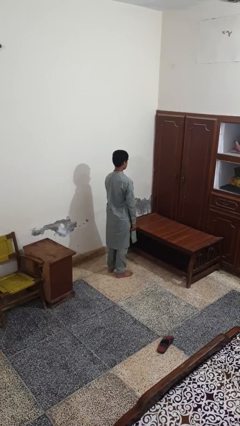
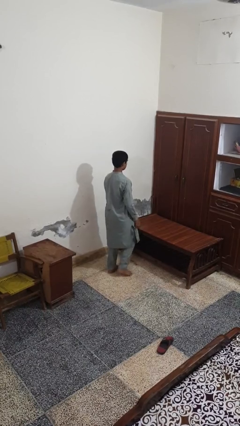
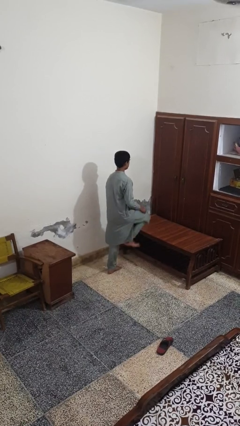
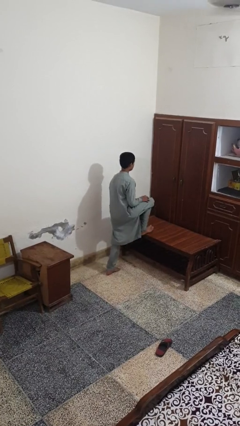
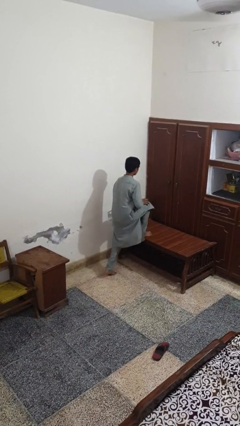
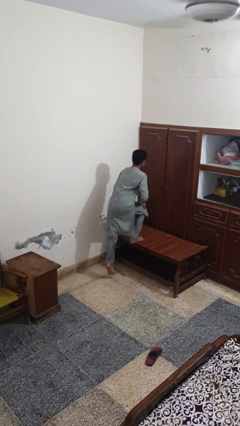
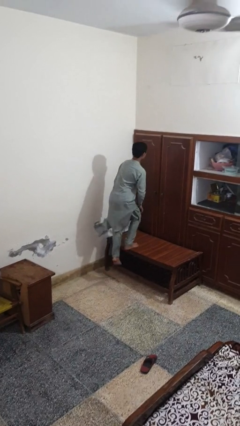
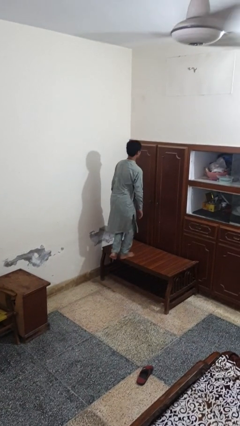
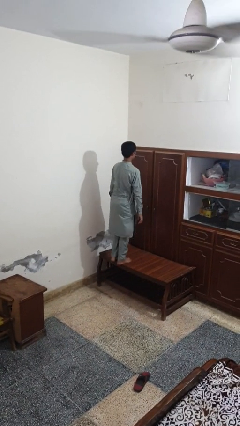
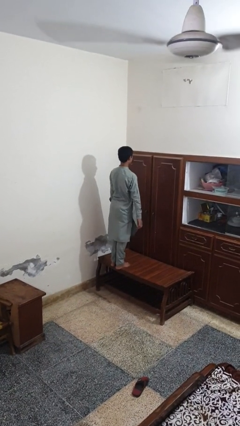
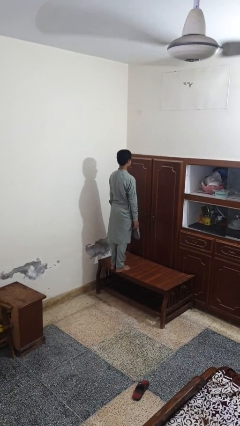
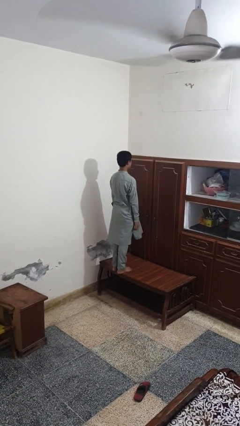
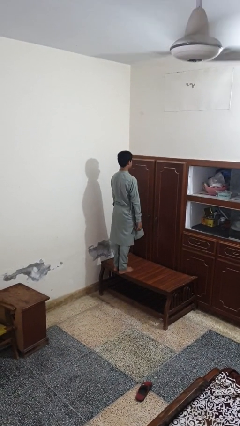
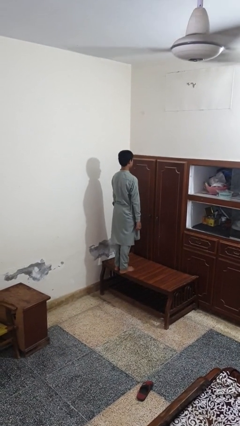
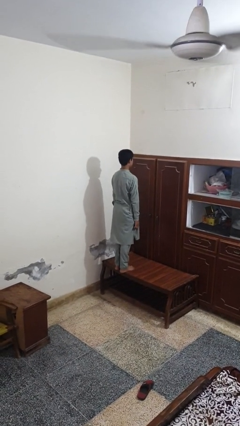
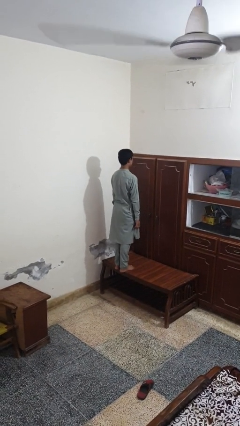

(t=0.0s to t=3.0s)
person climbs on table

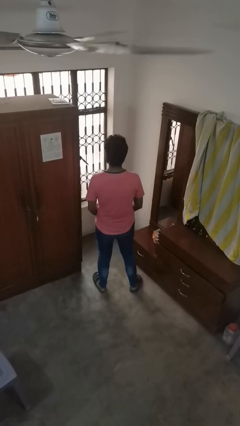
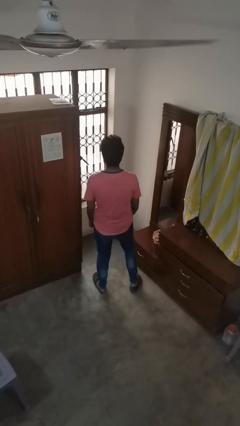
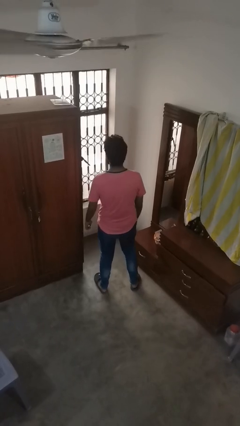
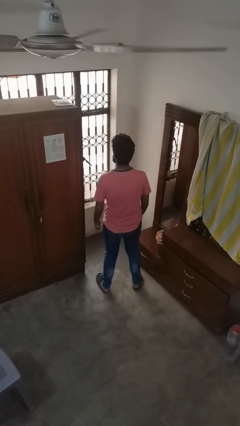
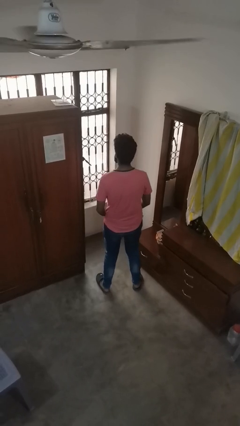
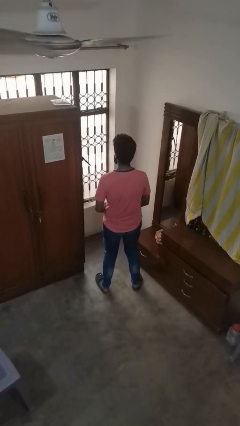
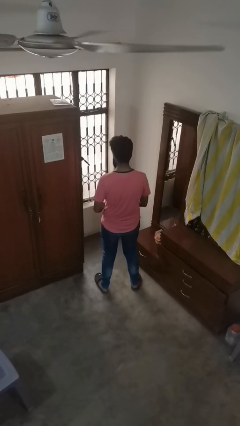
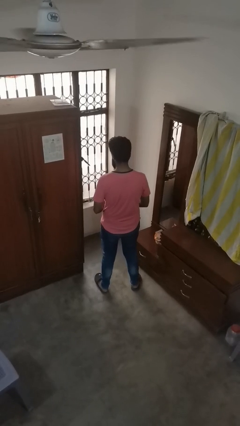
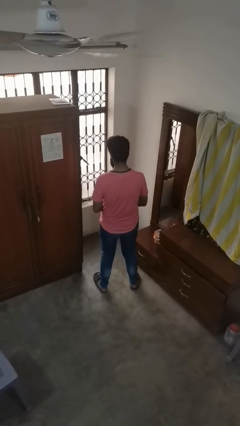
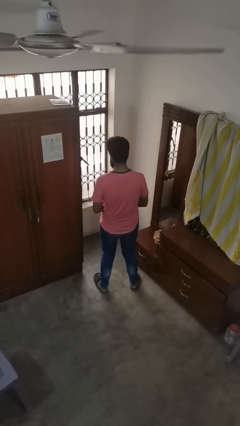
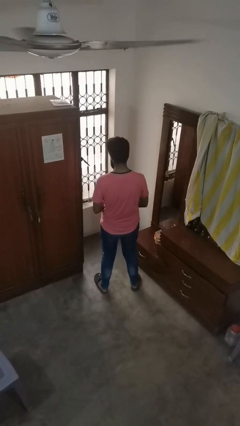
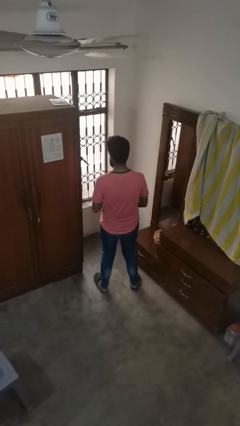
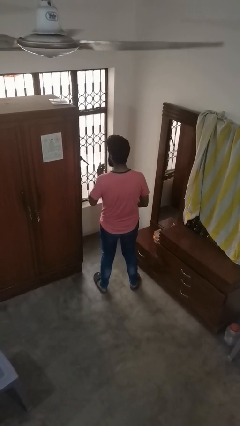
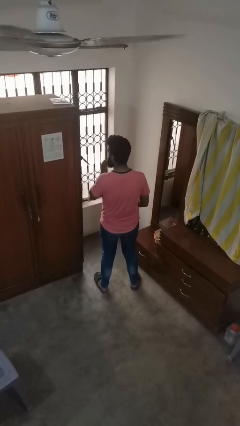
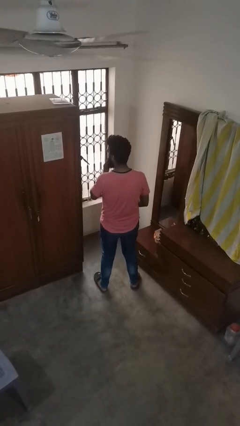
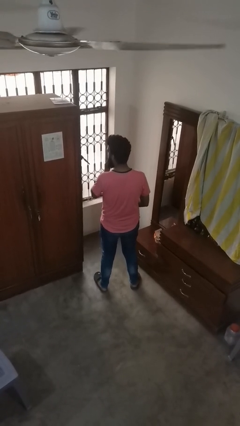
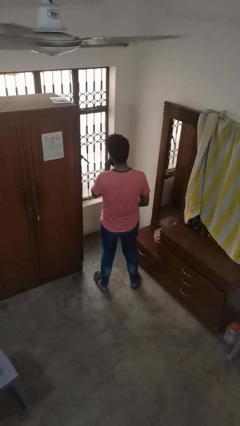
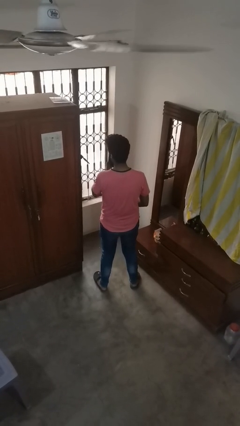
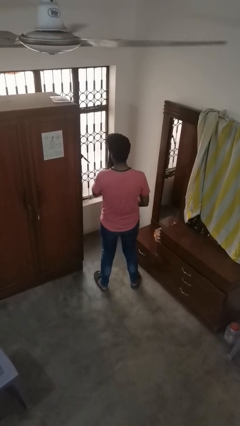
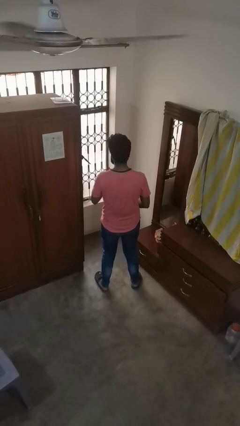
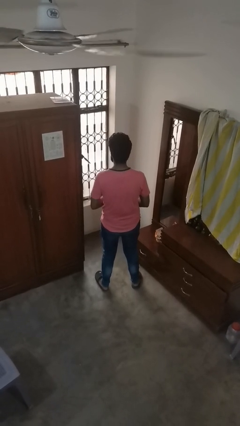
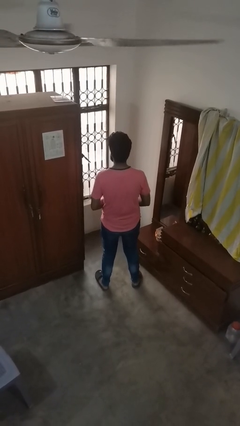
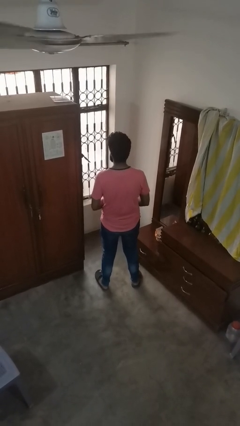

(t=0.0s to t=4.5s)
person applies lip makeup

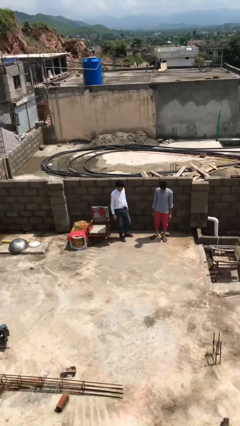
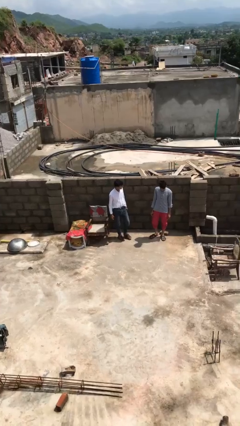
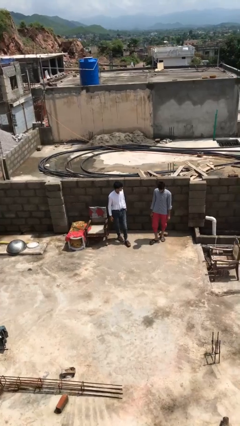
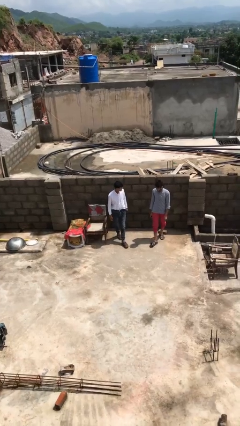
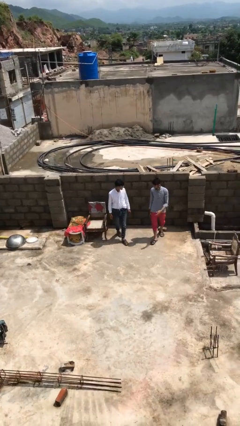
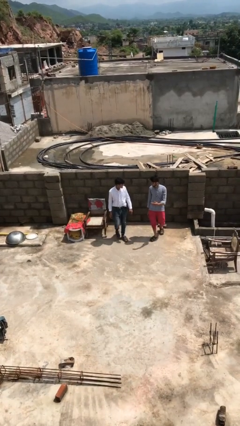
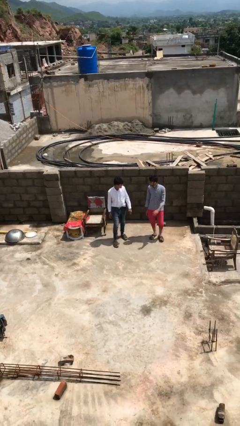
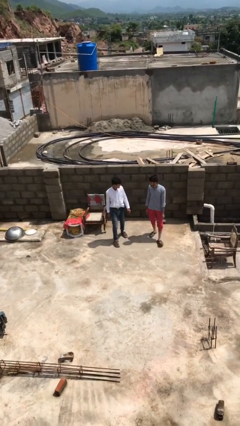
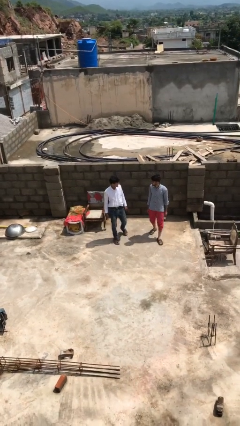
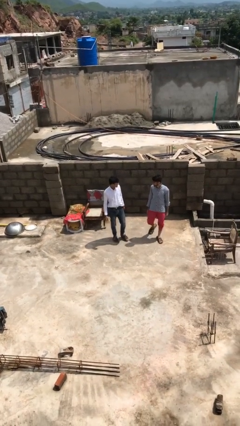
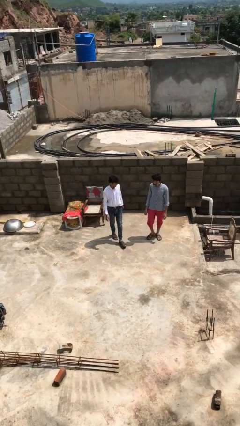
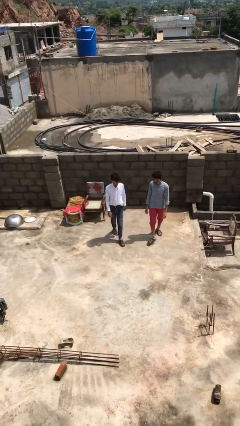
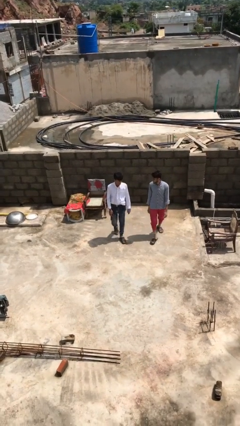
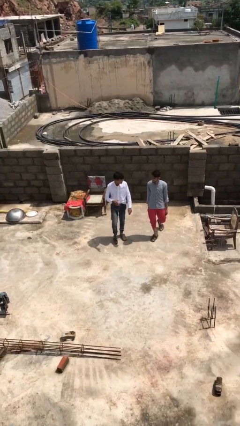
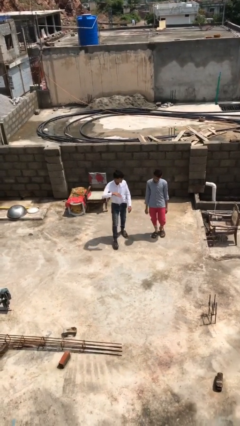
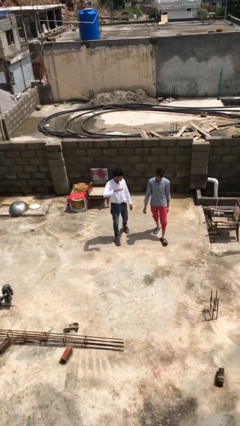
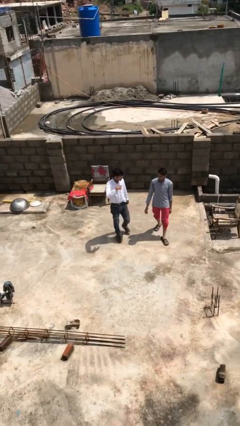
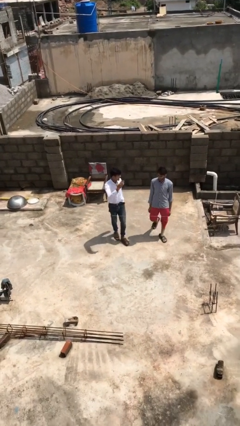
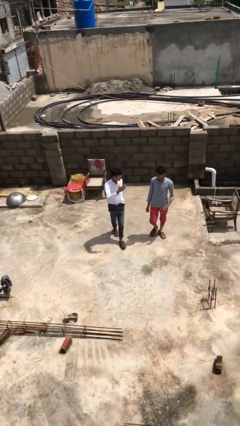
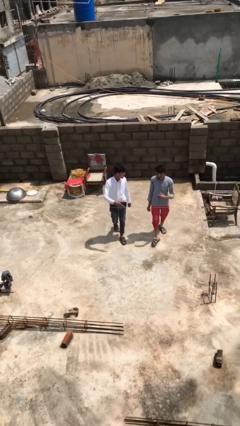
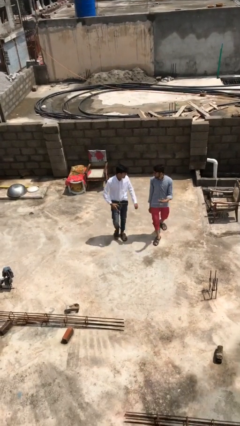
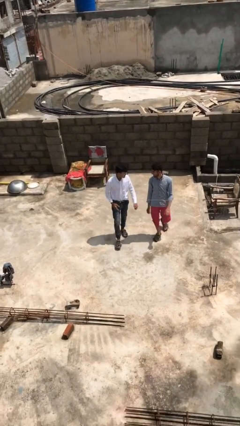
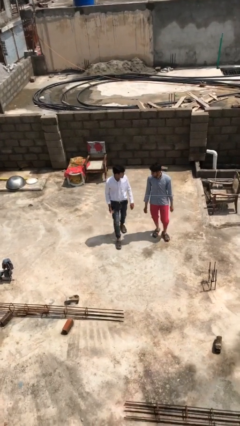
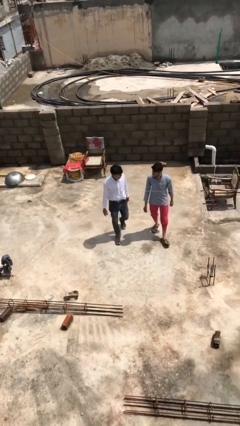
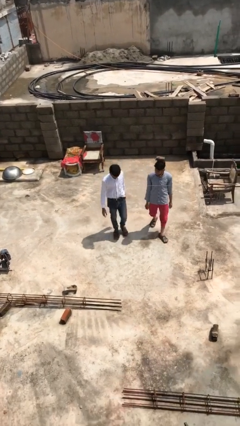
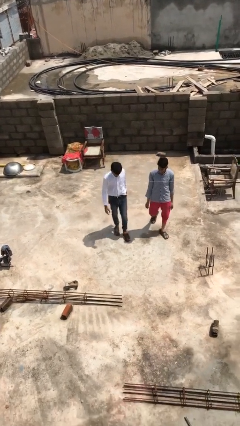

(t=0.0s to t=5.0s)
person talks to person

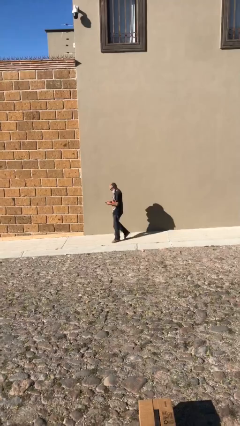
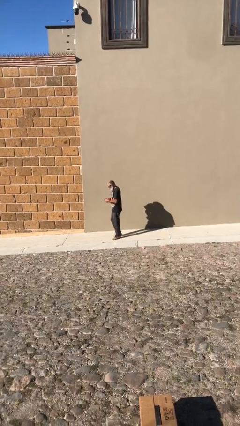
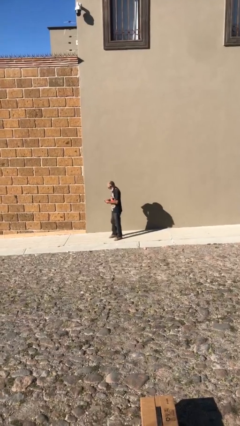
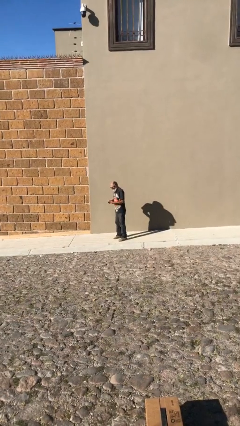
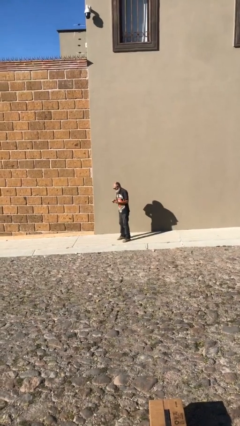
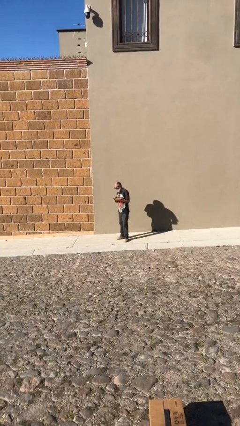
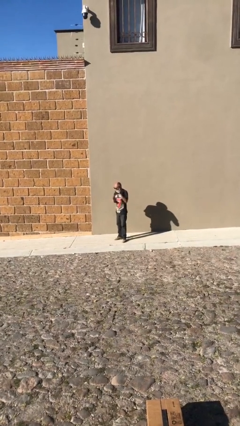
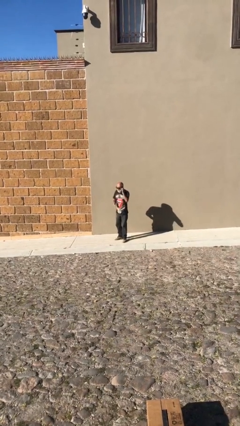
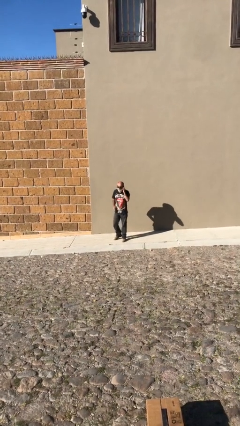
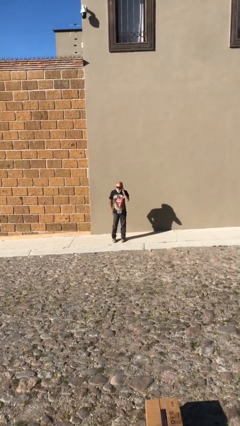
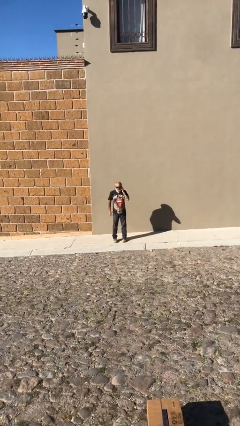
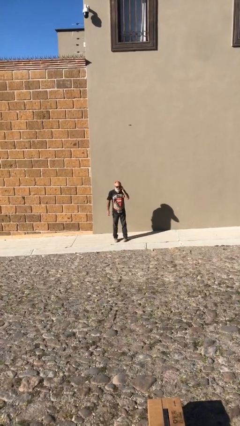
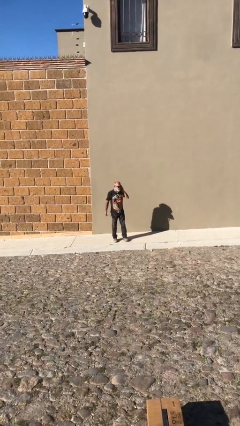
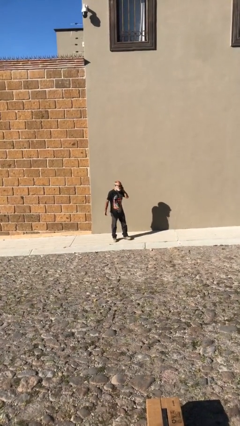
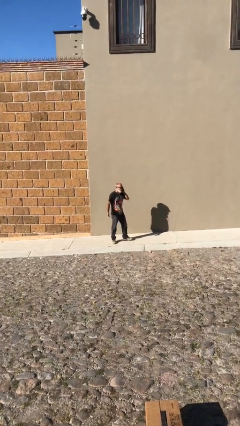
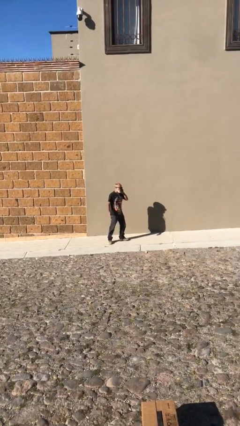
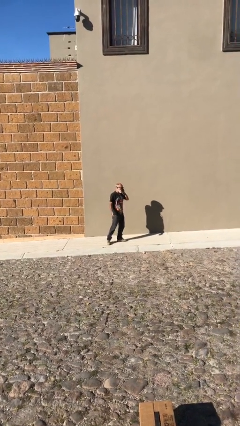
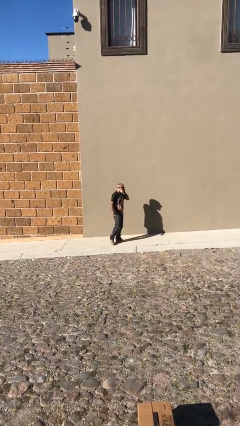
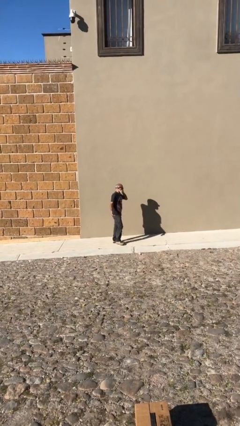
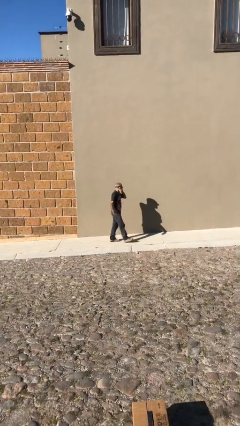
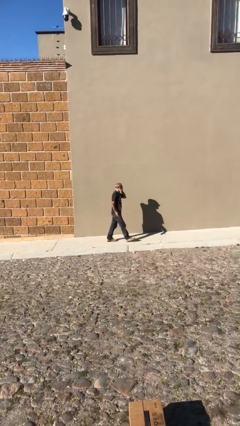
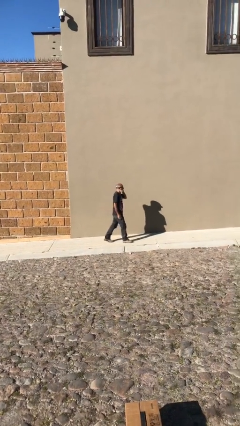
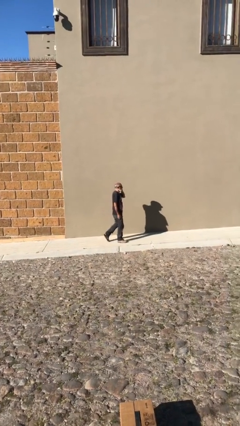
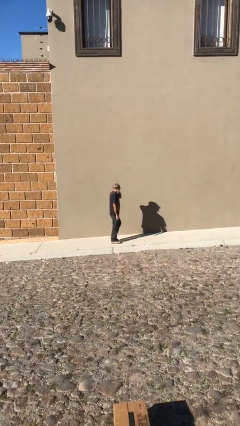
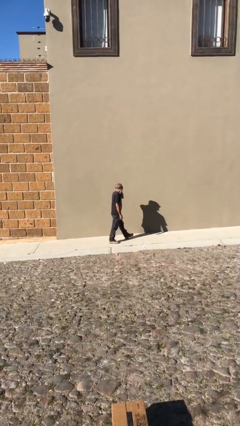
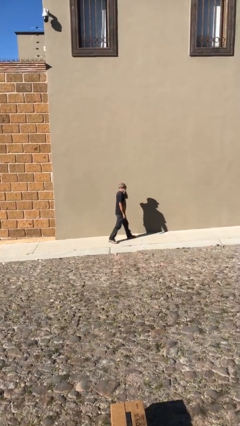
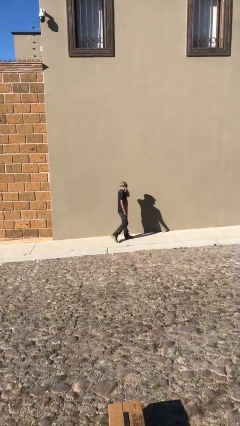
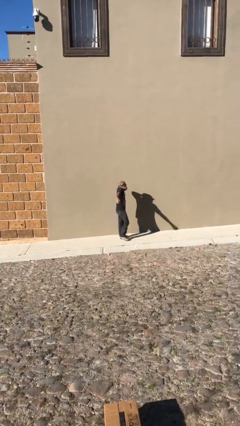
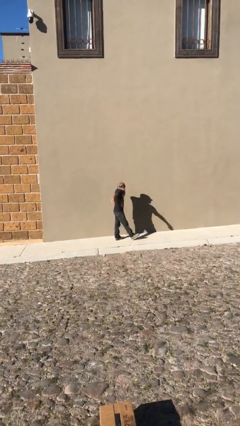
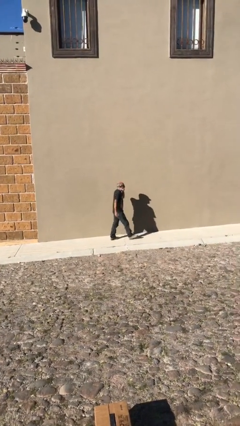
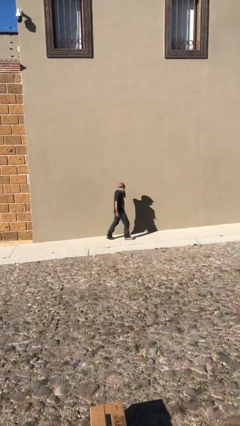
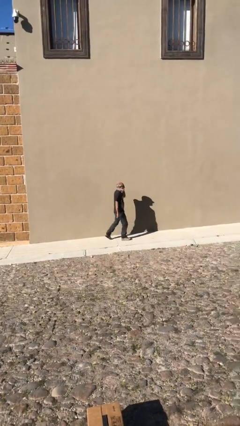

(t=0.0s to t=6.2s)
person talks on phone
